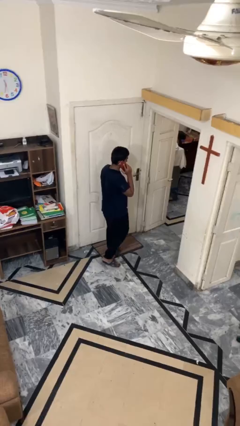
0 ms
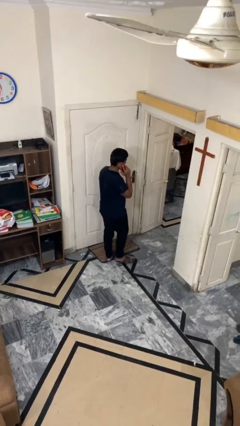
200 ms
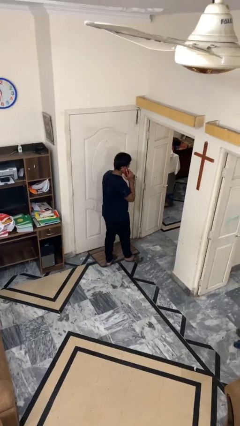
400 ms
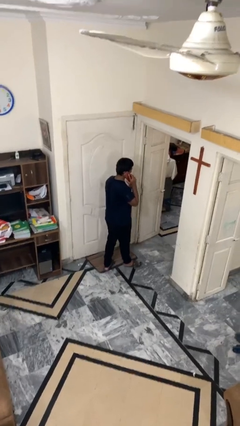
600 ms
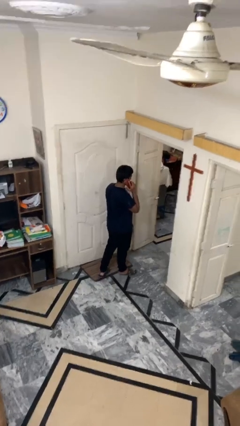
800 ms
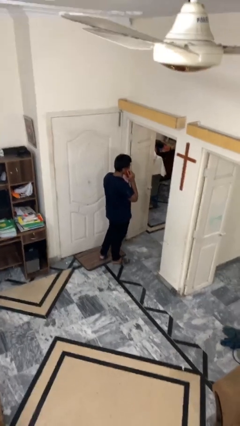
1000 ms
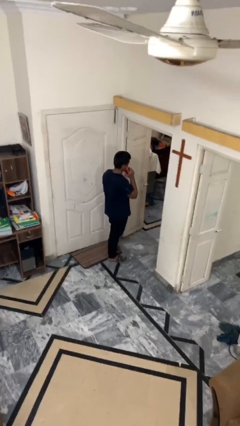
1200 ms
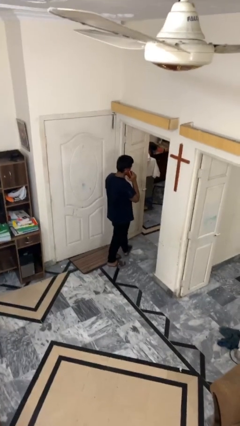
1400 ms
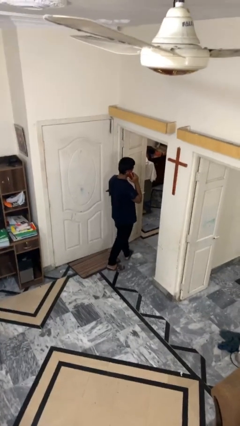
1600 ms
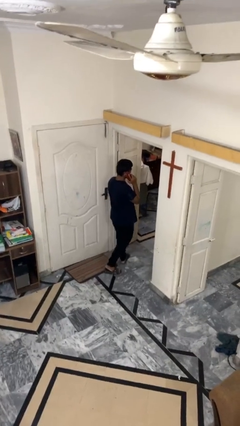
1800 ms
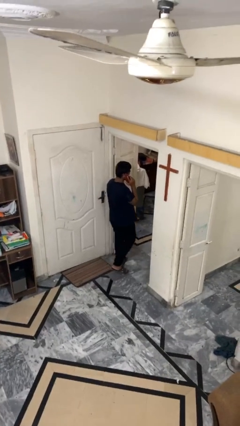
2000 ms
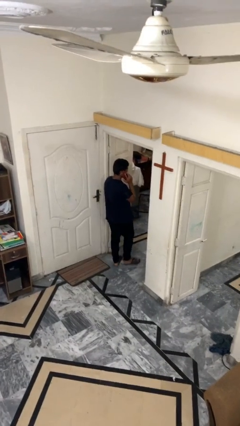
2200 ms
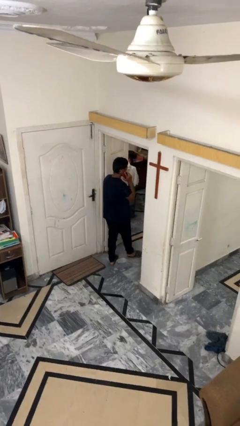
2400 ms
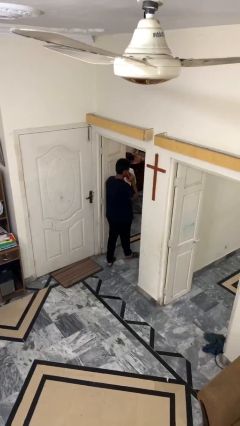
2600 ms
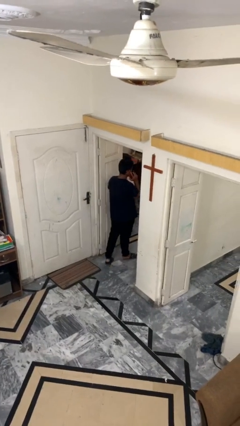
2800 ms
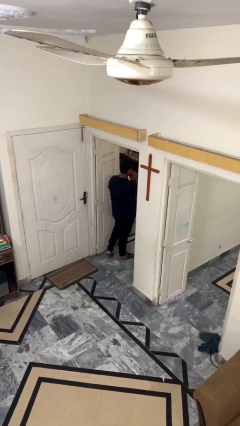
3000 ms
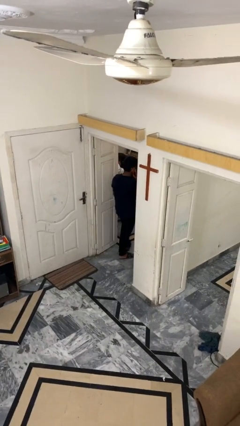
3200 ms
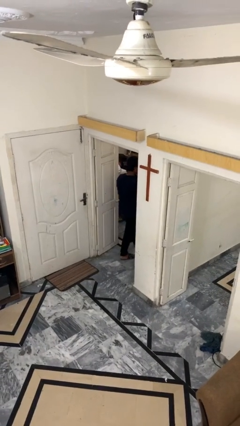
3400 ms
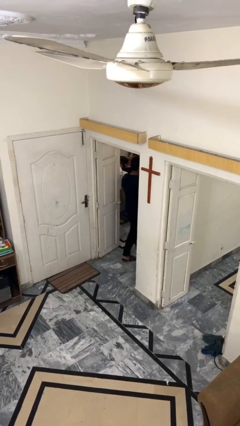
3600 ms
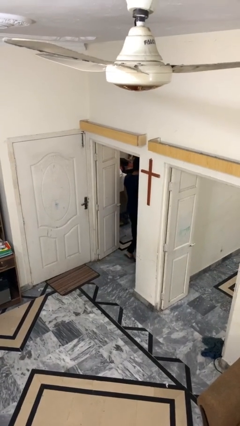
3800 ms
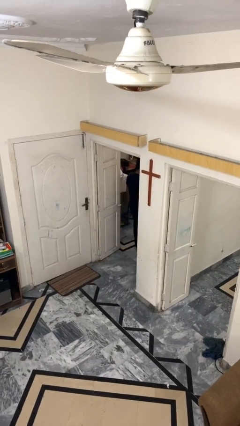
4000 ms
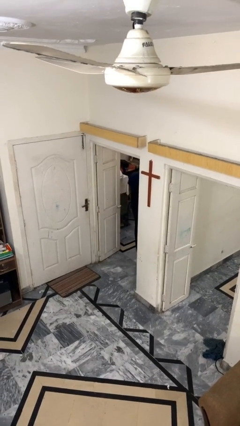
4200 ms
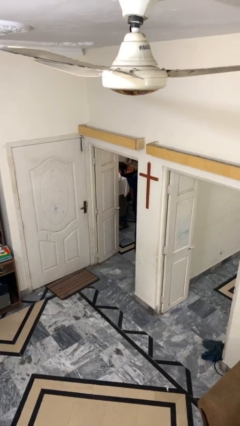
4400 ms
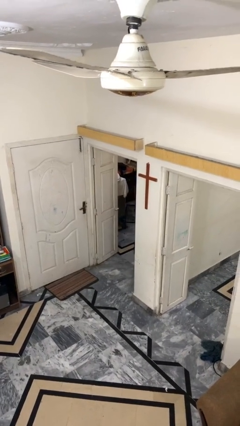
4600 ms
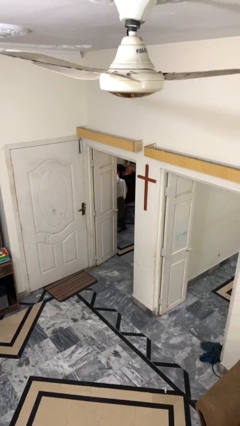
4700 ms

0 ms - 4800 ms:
person exits scene through structure

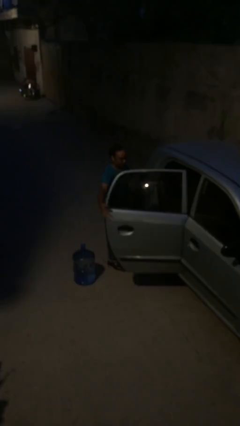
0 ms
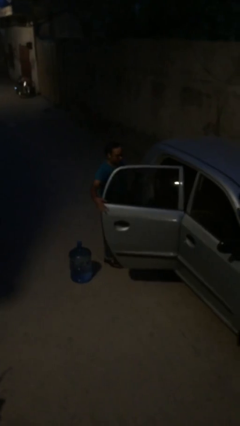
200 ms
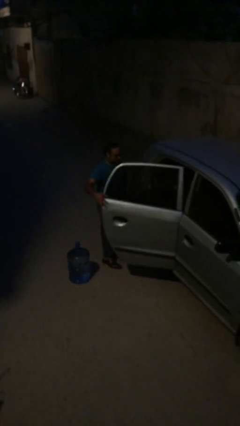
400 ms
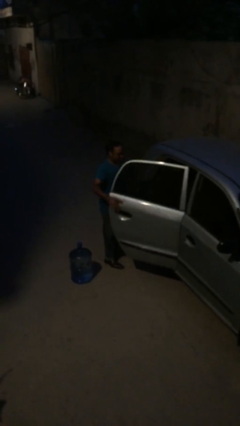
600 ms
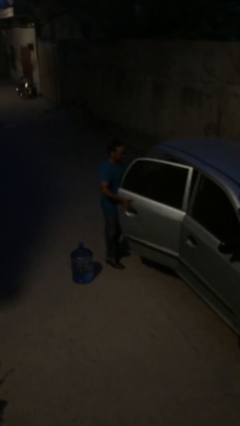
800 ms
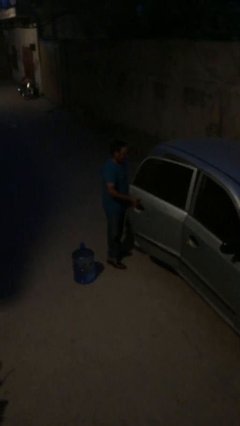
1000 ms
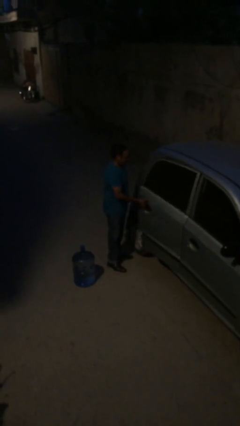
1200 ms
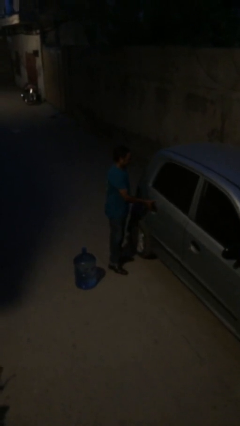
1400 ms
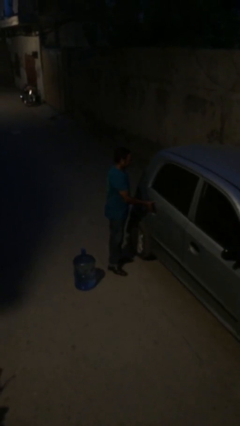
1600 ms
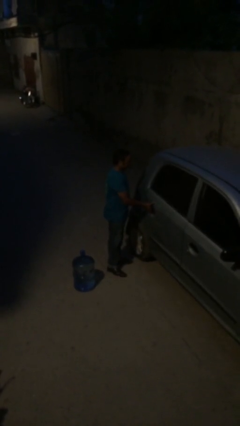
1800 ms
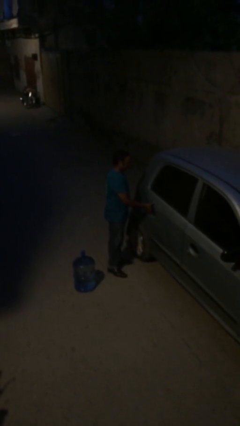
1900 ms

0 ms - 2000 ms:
person closes car door

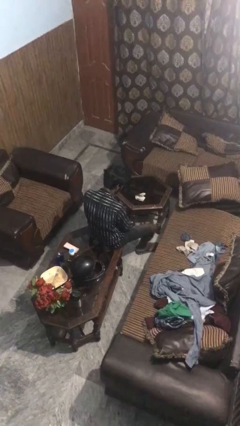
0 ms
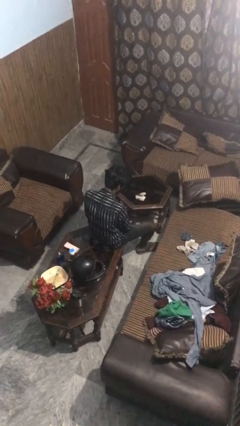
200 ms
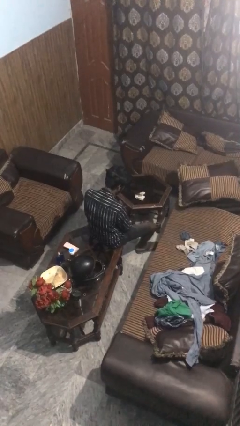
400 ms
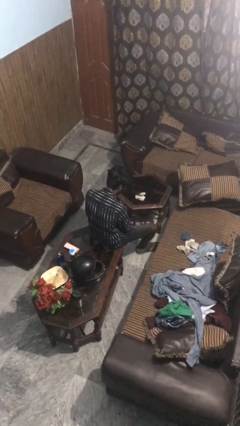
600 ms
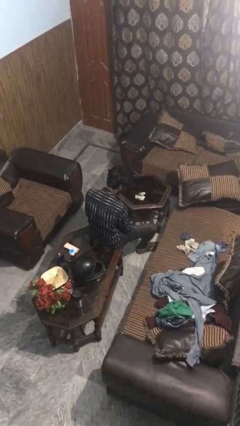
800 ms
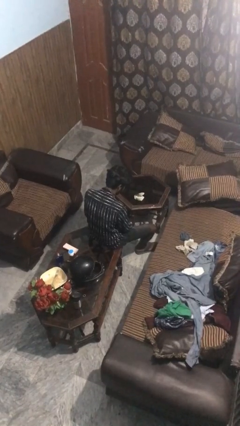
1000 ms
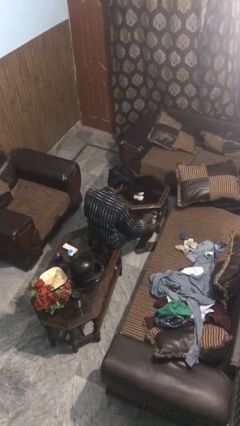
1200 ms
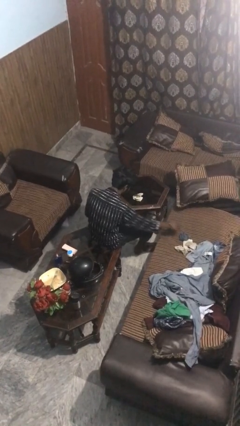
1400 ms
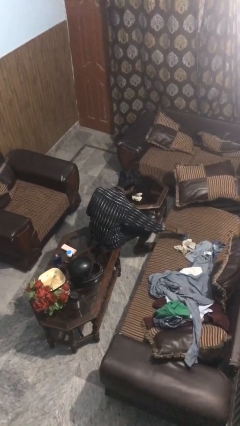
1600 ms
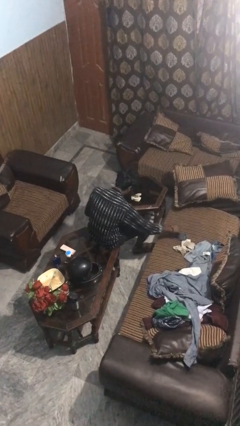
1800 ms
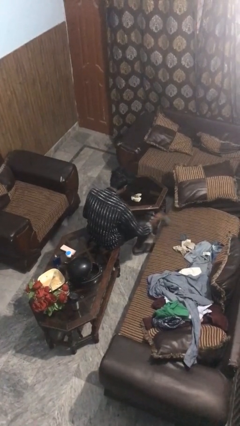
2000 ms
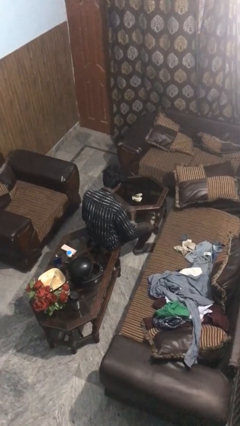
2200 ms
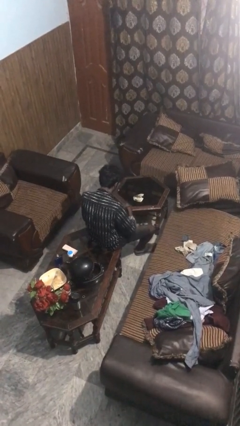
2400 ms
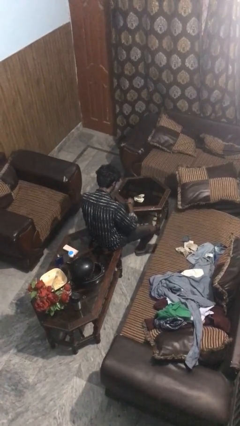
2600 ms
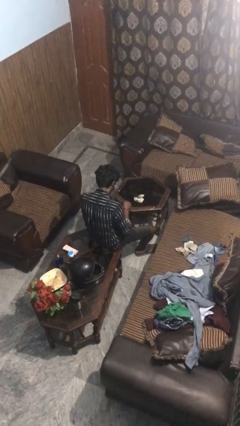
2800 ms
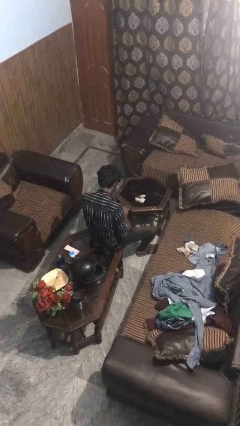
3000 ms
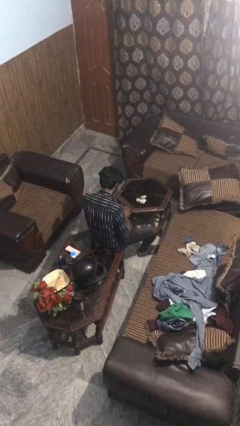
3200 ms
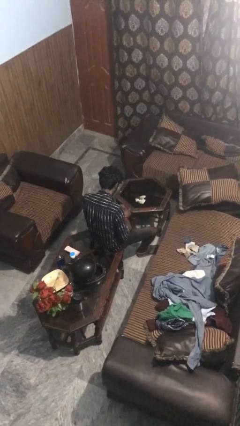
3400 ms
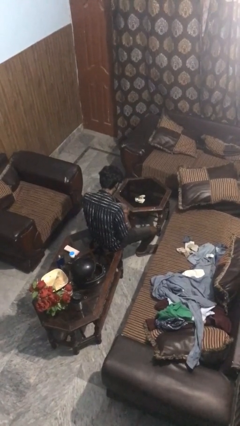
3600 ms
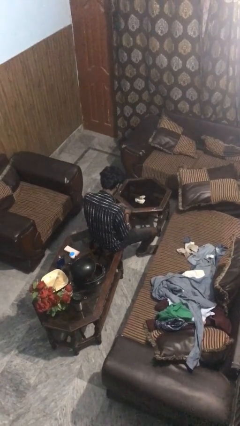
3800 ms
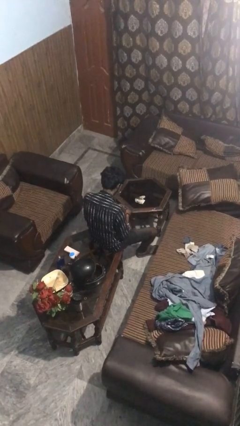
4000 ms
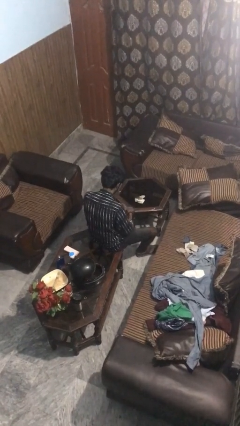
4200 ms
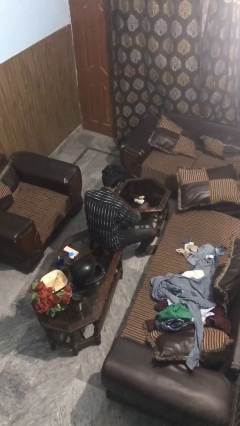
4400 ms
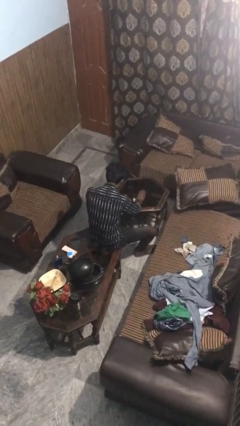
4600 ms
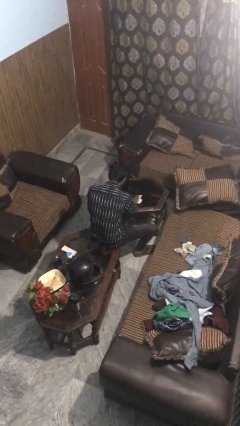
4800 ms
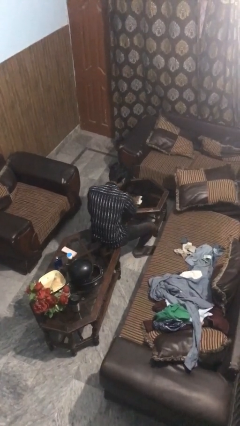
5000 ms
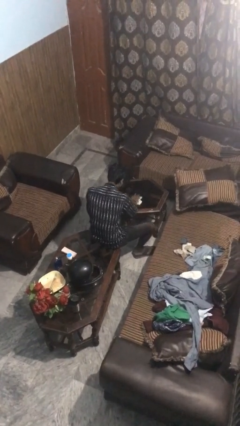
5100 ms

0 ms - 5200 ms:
person folds socks

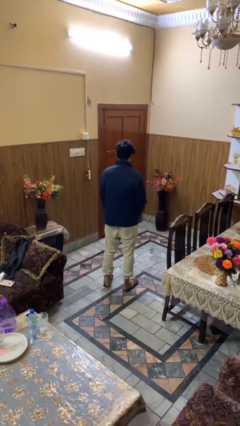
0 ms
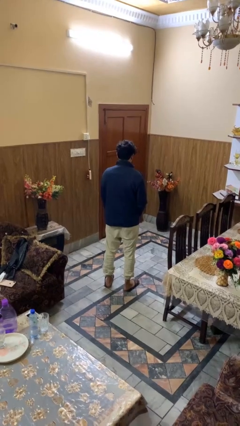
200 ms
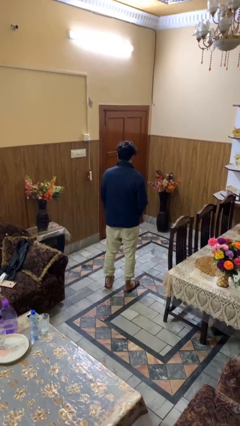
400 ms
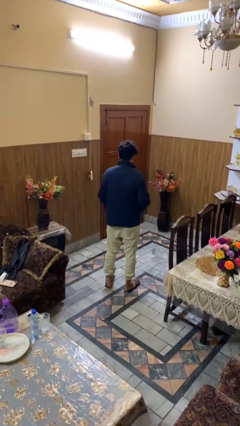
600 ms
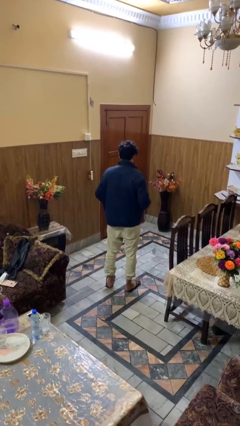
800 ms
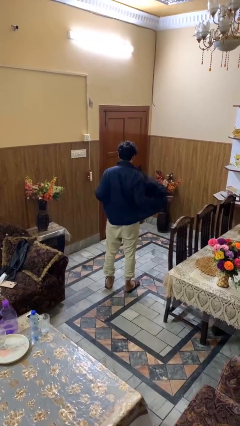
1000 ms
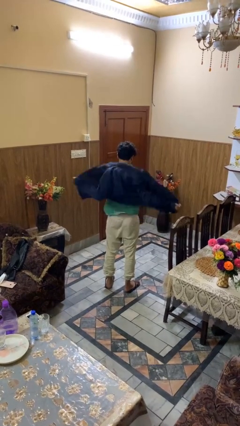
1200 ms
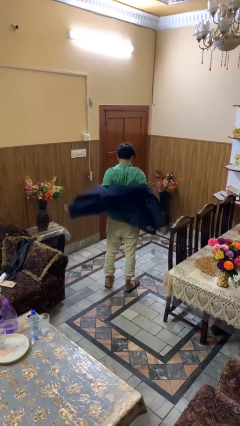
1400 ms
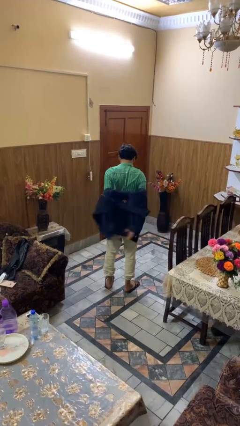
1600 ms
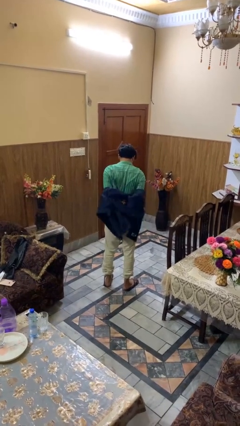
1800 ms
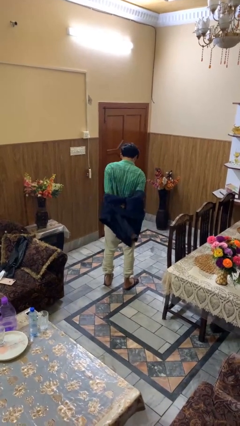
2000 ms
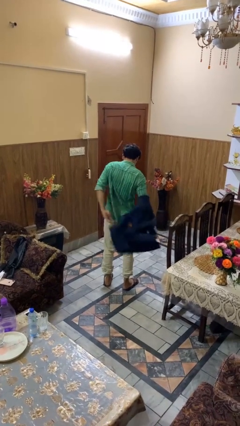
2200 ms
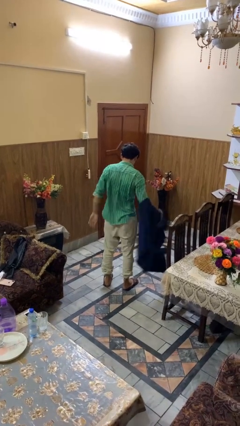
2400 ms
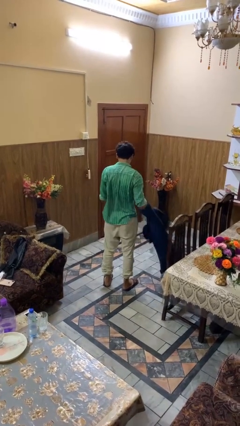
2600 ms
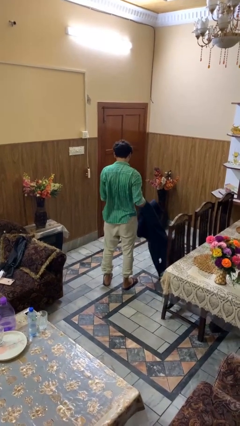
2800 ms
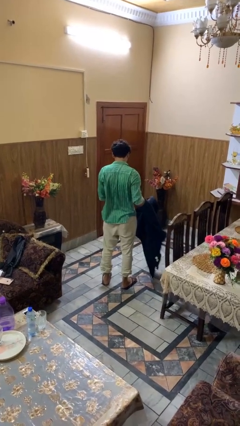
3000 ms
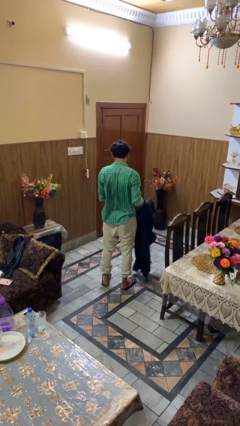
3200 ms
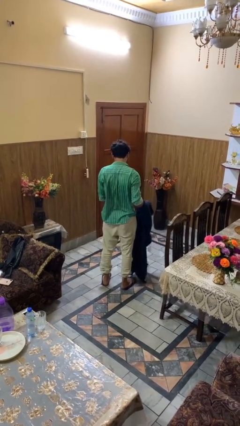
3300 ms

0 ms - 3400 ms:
person takes off jacket

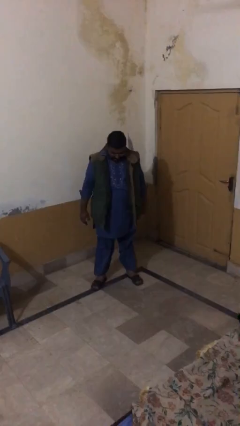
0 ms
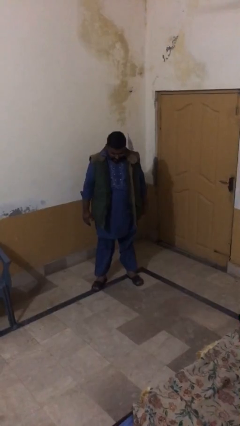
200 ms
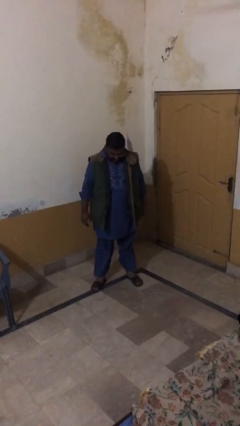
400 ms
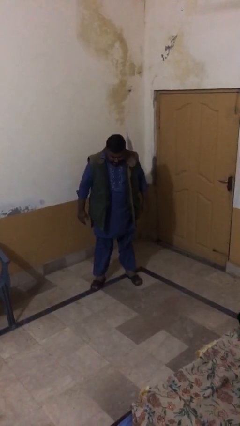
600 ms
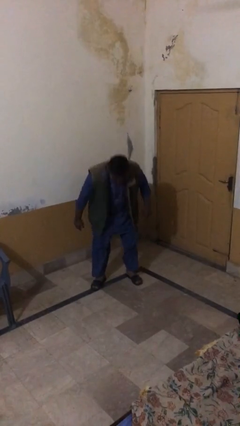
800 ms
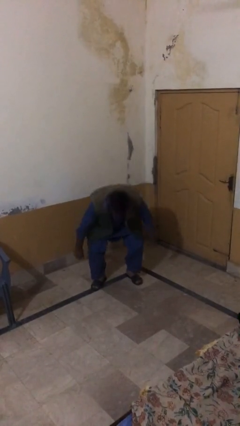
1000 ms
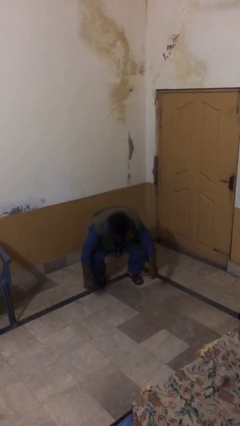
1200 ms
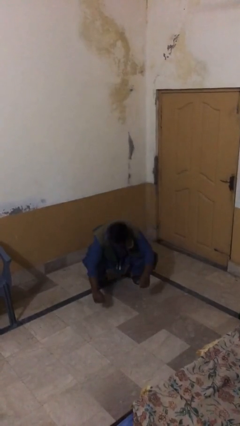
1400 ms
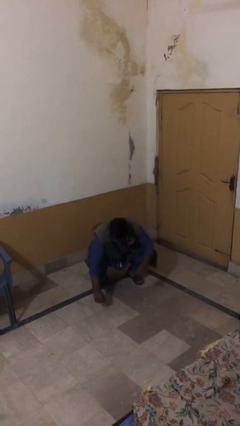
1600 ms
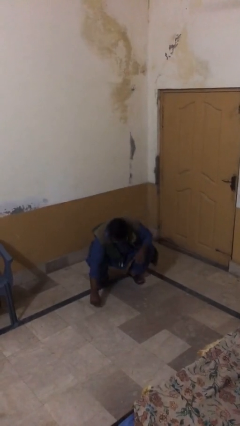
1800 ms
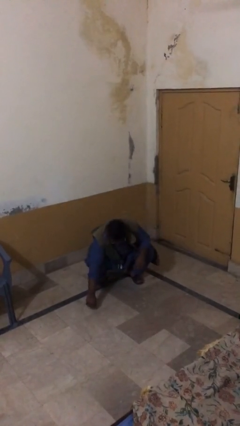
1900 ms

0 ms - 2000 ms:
person sits down
